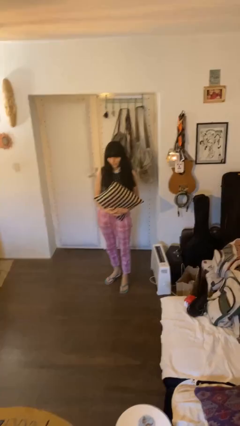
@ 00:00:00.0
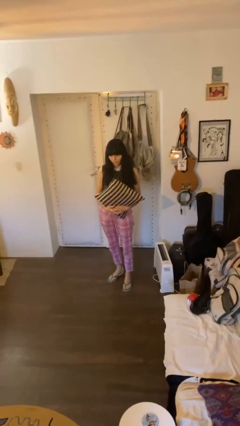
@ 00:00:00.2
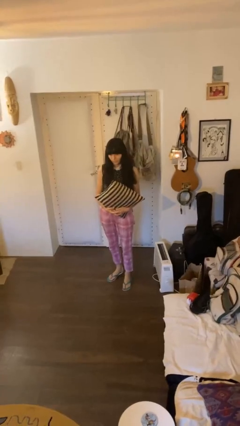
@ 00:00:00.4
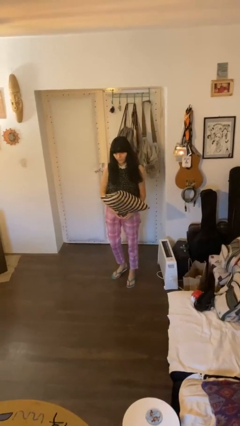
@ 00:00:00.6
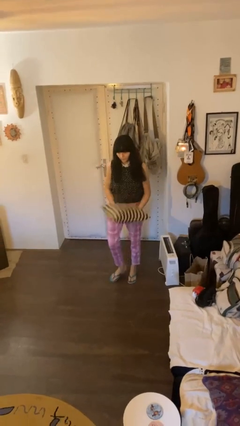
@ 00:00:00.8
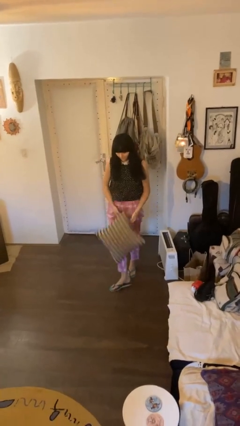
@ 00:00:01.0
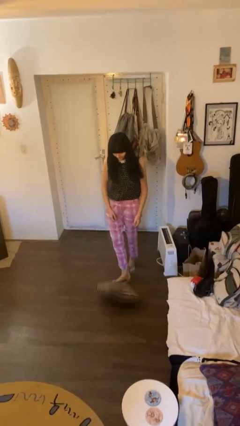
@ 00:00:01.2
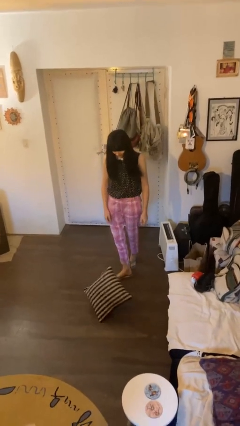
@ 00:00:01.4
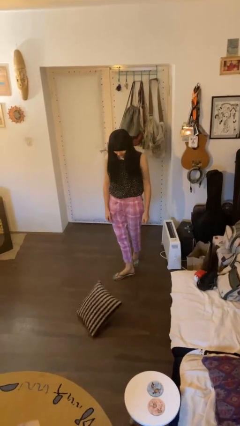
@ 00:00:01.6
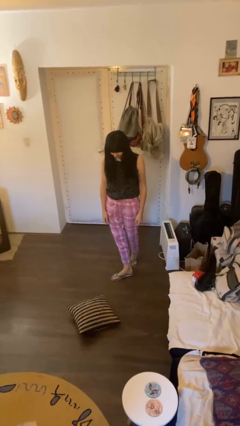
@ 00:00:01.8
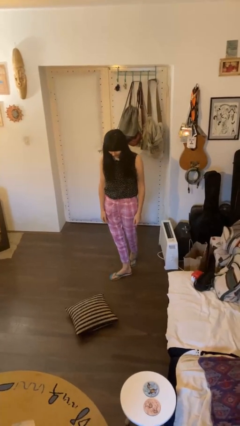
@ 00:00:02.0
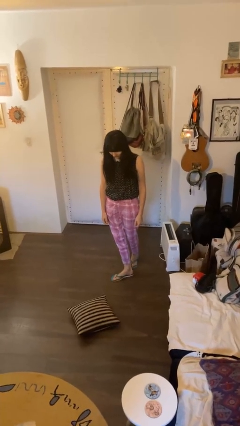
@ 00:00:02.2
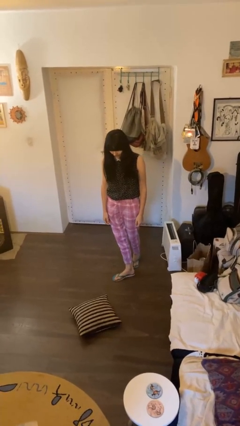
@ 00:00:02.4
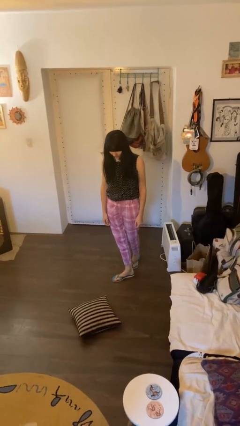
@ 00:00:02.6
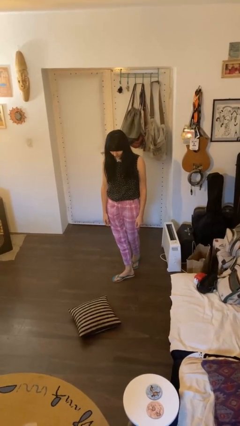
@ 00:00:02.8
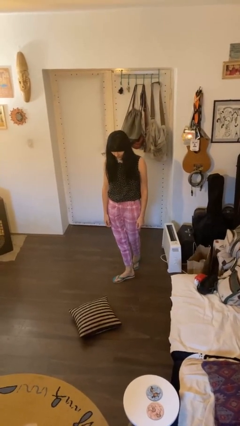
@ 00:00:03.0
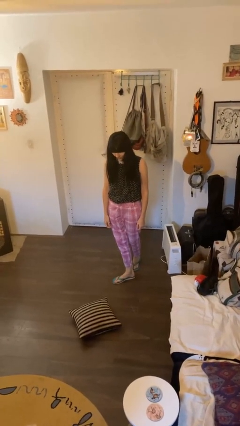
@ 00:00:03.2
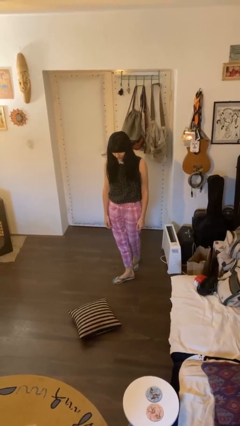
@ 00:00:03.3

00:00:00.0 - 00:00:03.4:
person drops object

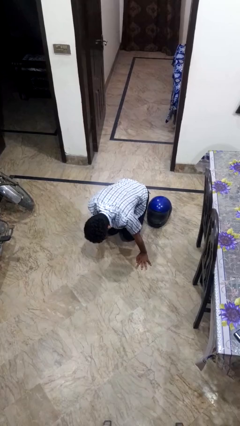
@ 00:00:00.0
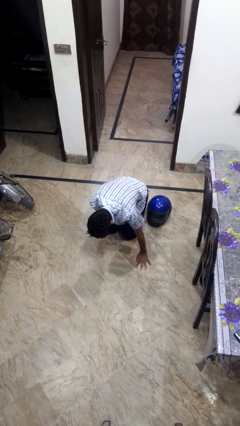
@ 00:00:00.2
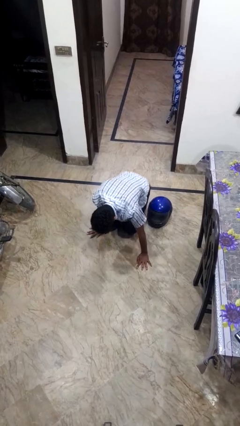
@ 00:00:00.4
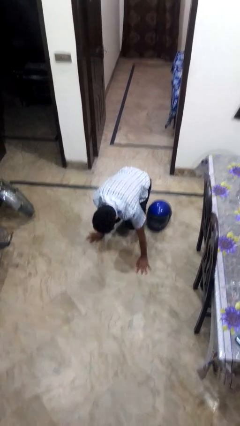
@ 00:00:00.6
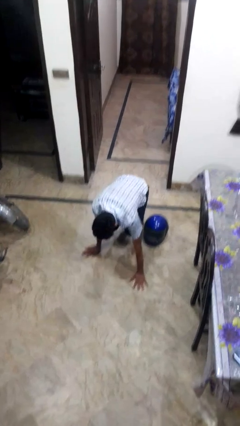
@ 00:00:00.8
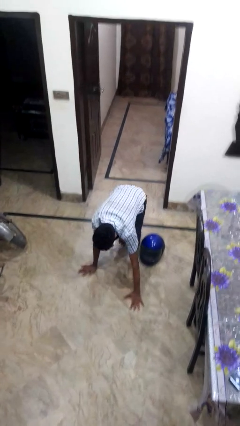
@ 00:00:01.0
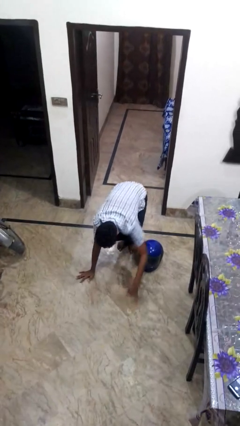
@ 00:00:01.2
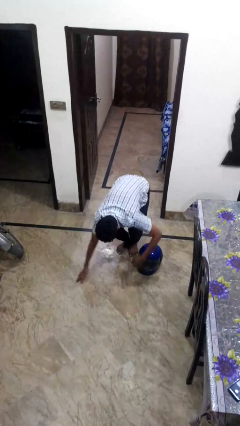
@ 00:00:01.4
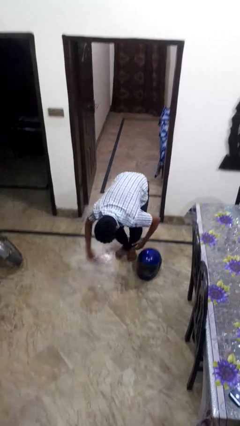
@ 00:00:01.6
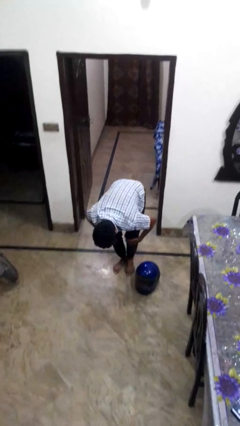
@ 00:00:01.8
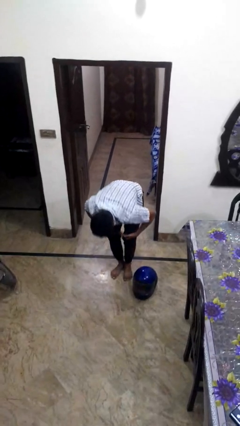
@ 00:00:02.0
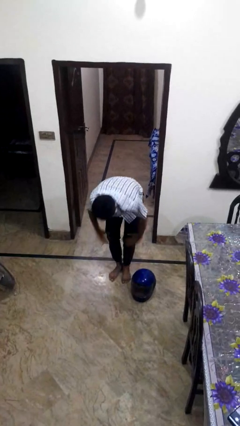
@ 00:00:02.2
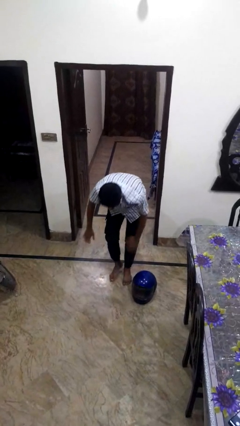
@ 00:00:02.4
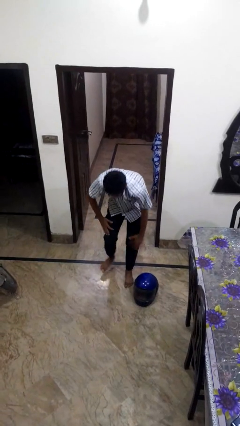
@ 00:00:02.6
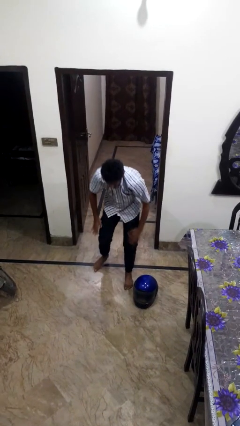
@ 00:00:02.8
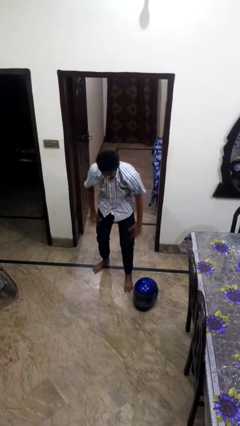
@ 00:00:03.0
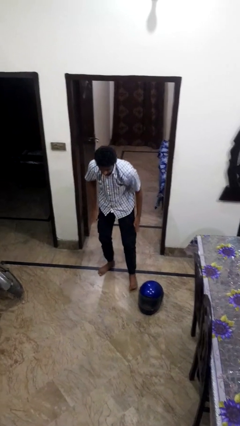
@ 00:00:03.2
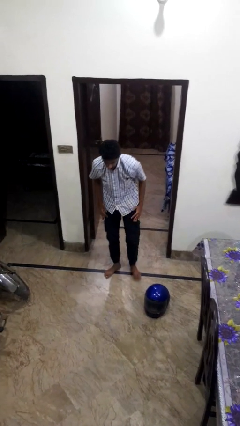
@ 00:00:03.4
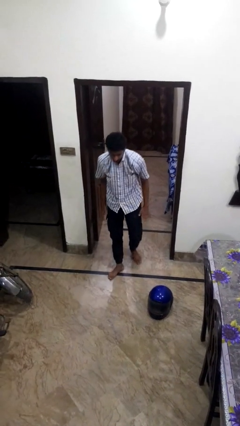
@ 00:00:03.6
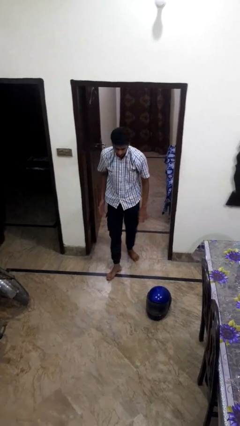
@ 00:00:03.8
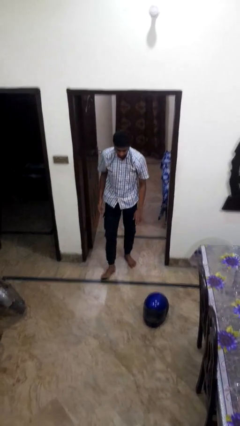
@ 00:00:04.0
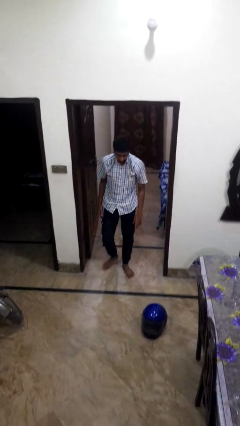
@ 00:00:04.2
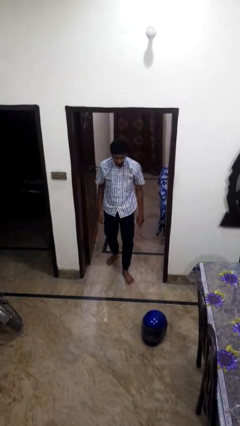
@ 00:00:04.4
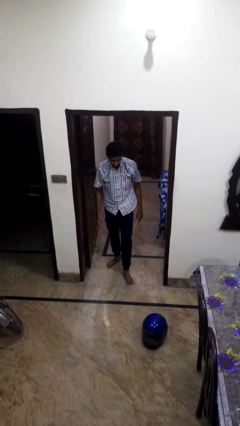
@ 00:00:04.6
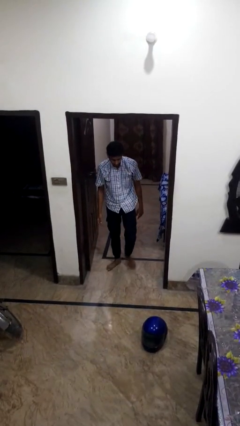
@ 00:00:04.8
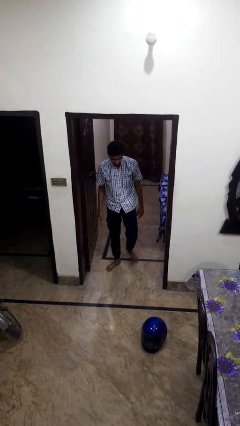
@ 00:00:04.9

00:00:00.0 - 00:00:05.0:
person stands up from floor

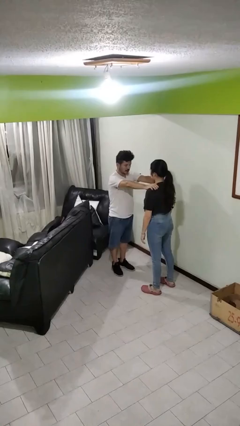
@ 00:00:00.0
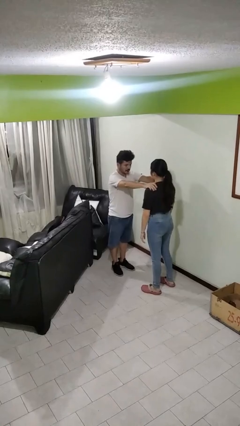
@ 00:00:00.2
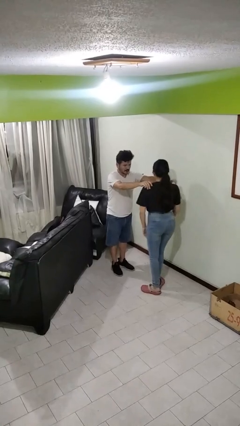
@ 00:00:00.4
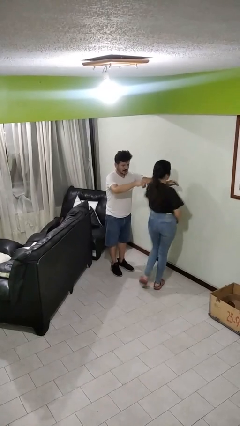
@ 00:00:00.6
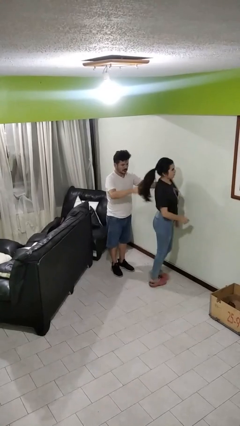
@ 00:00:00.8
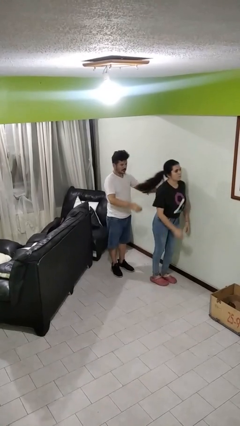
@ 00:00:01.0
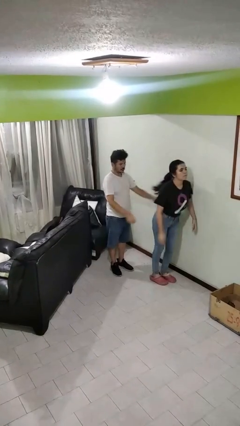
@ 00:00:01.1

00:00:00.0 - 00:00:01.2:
person spins person around

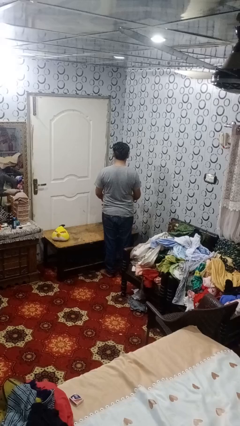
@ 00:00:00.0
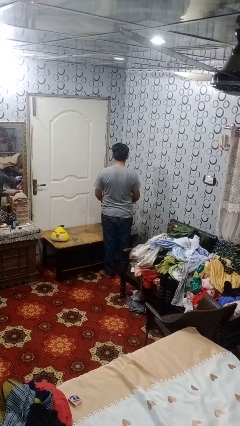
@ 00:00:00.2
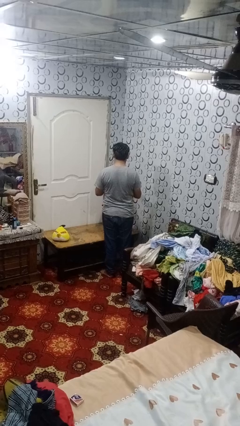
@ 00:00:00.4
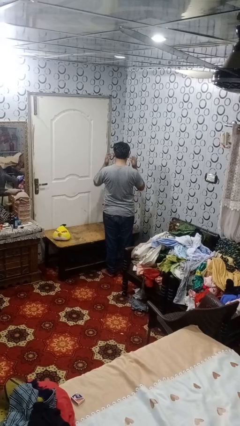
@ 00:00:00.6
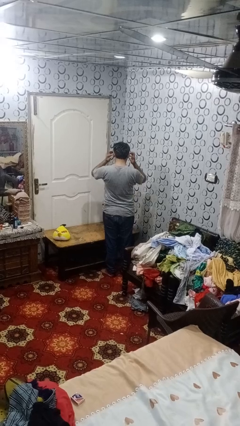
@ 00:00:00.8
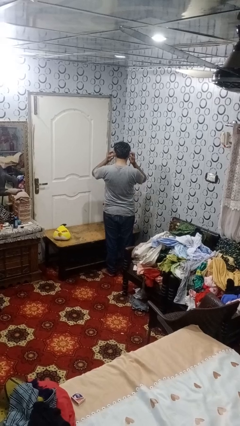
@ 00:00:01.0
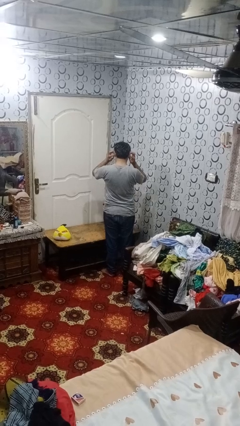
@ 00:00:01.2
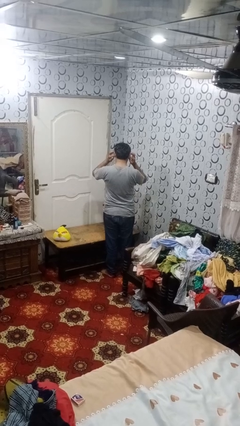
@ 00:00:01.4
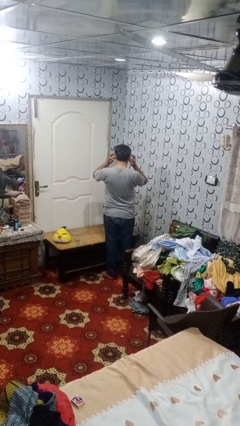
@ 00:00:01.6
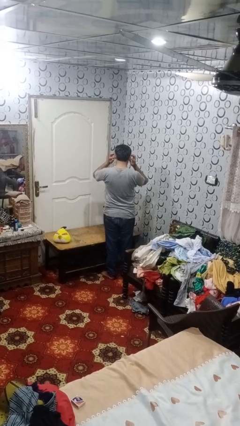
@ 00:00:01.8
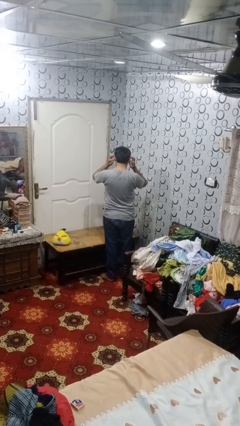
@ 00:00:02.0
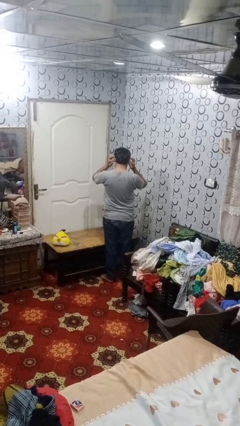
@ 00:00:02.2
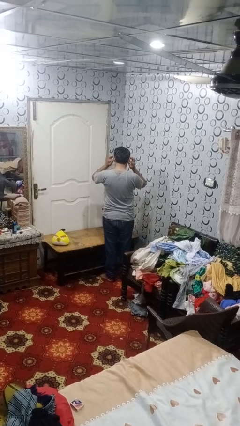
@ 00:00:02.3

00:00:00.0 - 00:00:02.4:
person puts fingers in ear

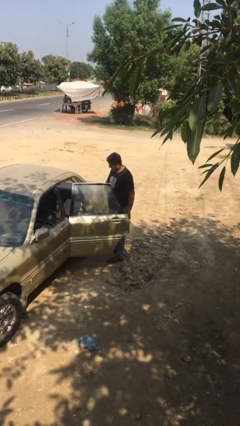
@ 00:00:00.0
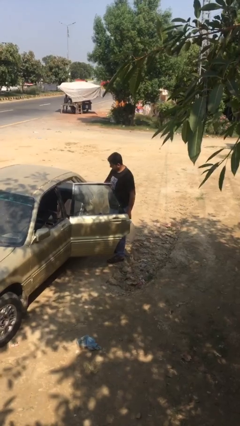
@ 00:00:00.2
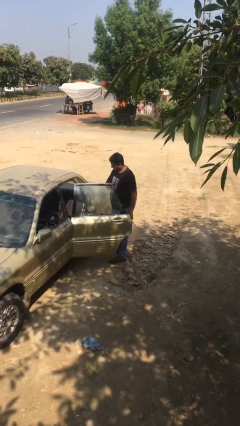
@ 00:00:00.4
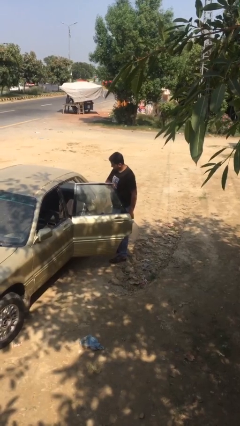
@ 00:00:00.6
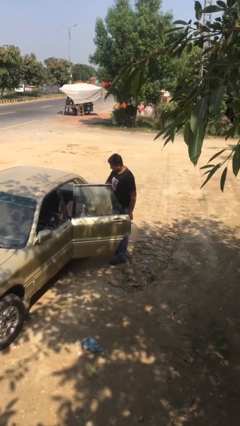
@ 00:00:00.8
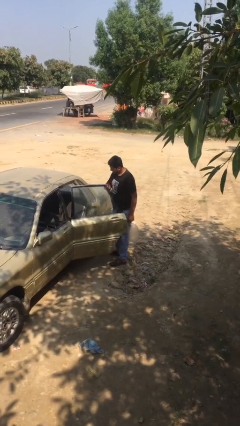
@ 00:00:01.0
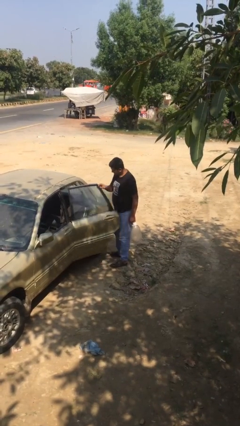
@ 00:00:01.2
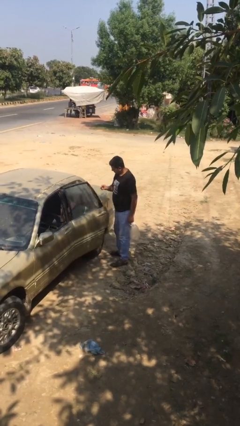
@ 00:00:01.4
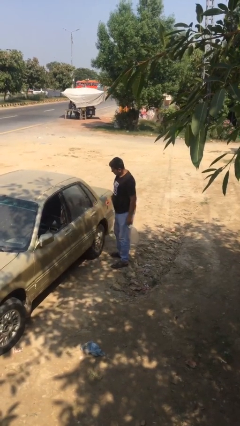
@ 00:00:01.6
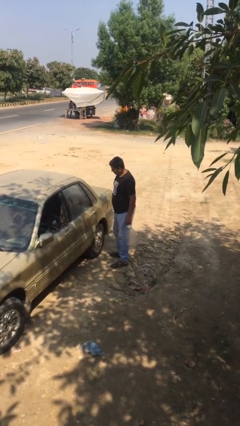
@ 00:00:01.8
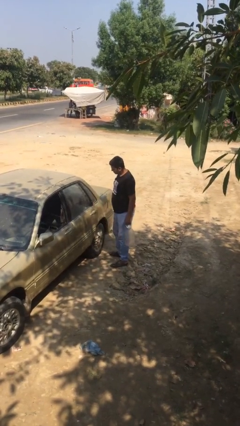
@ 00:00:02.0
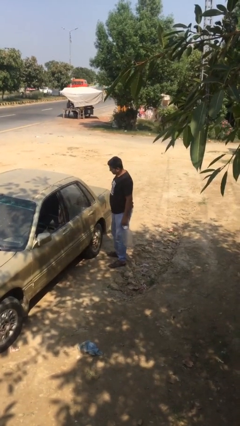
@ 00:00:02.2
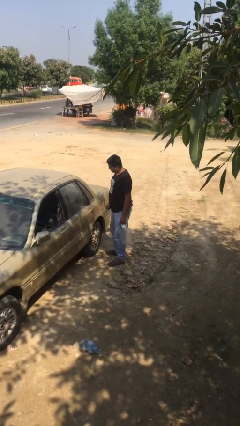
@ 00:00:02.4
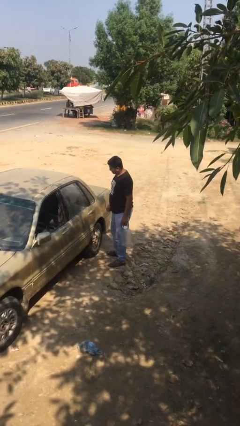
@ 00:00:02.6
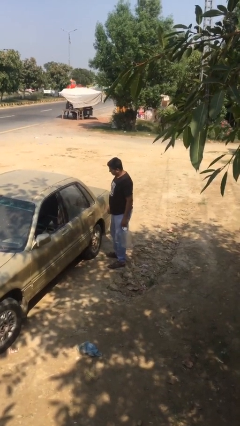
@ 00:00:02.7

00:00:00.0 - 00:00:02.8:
person closes car door

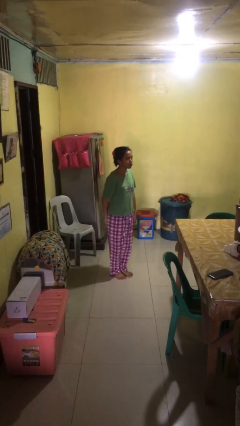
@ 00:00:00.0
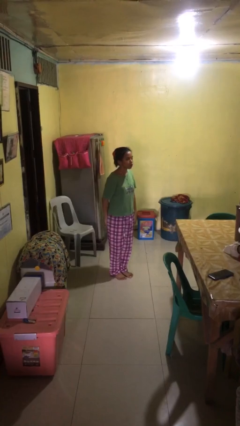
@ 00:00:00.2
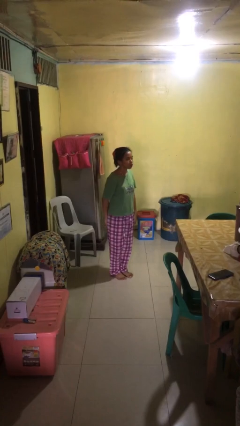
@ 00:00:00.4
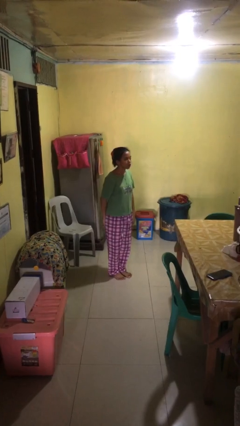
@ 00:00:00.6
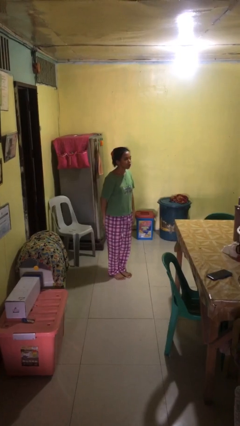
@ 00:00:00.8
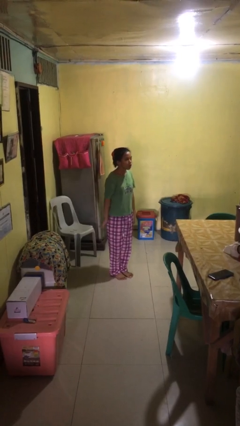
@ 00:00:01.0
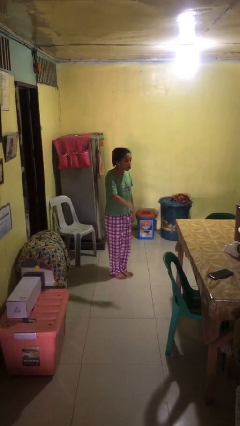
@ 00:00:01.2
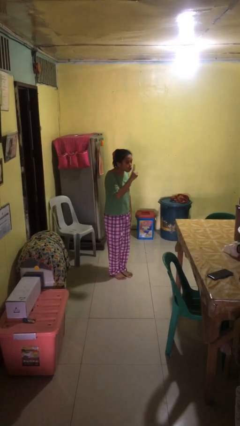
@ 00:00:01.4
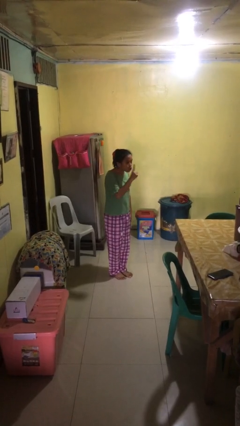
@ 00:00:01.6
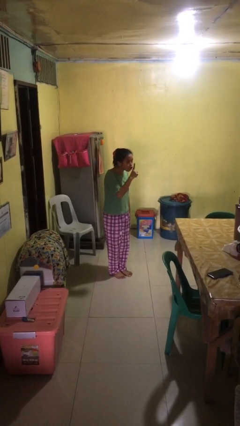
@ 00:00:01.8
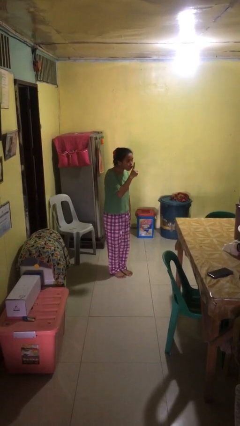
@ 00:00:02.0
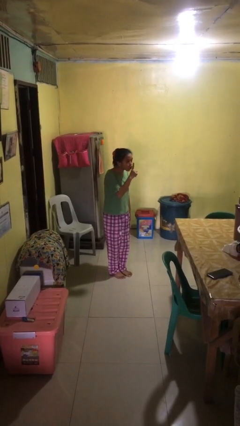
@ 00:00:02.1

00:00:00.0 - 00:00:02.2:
person gestures be quiet
